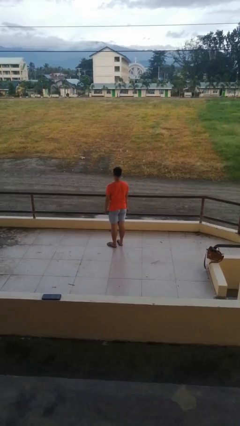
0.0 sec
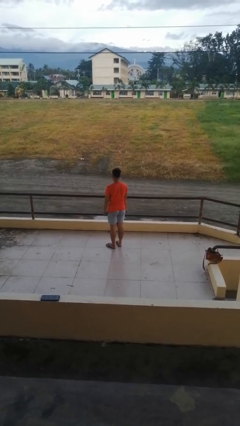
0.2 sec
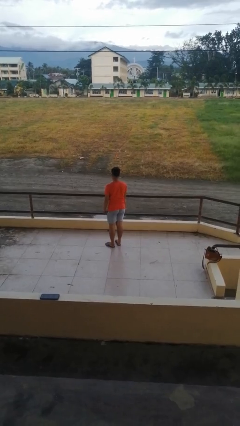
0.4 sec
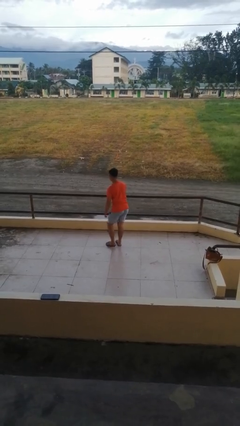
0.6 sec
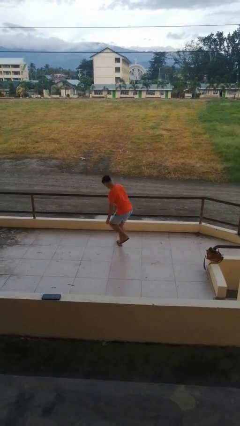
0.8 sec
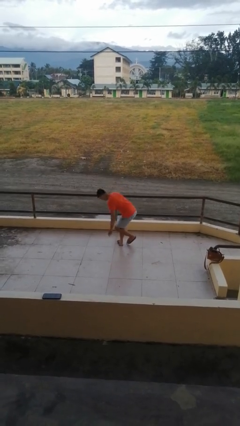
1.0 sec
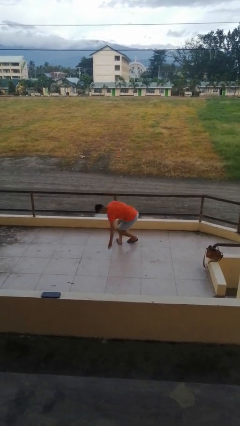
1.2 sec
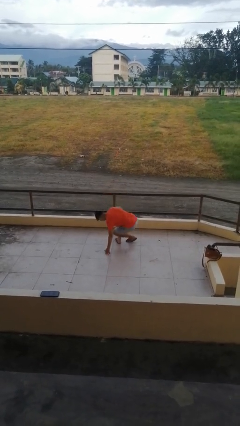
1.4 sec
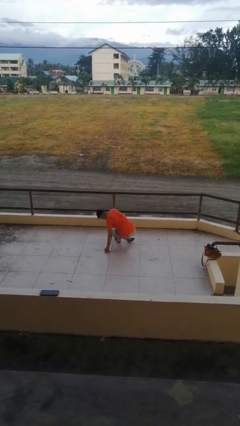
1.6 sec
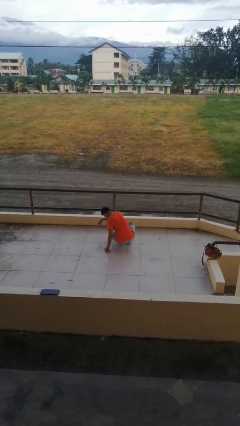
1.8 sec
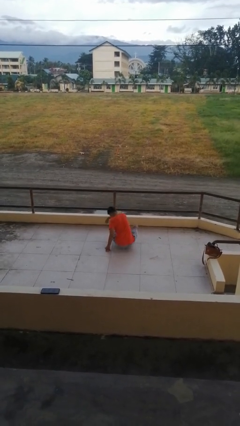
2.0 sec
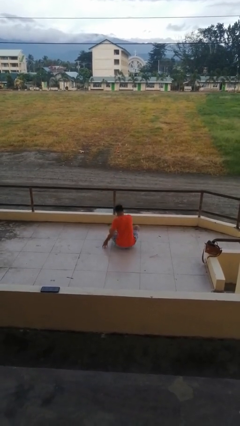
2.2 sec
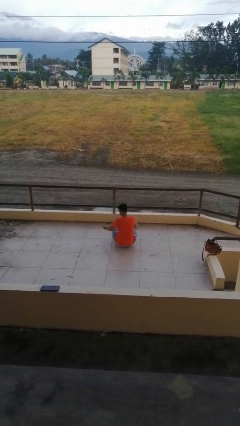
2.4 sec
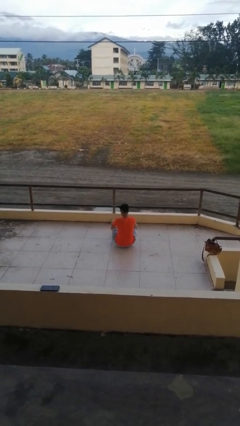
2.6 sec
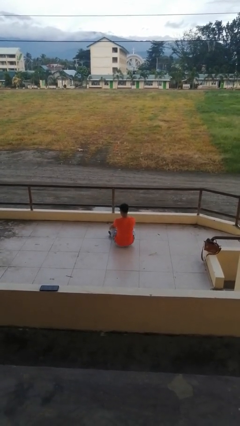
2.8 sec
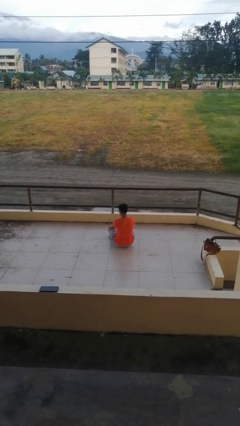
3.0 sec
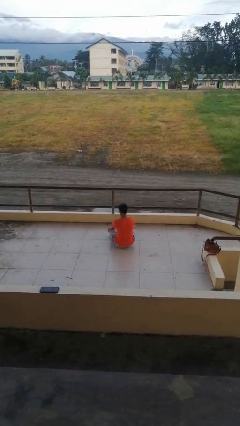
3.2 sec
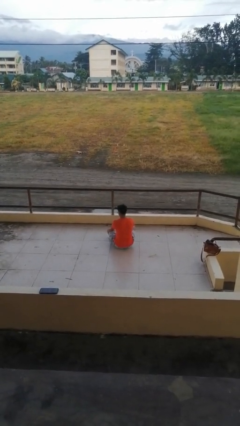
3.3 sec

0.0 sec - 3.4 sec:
person sits crisscross

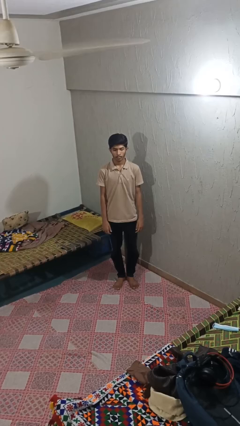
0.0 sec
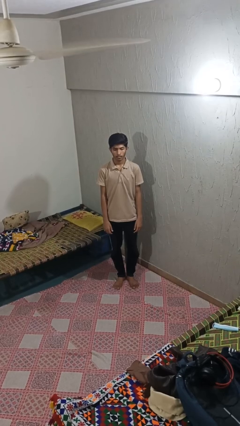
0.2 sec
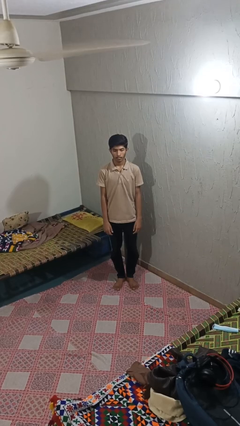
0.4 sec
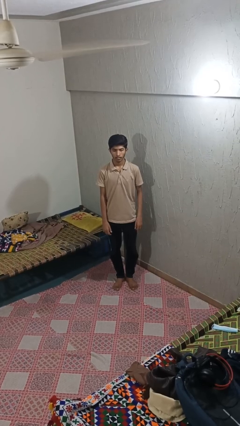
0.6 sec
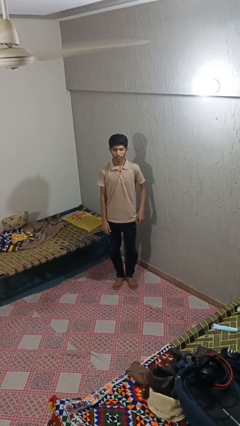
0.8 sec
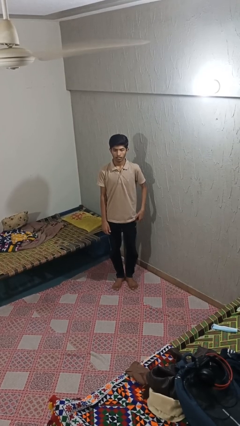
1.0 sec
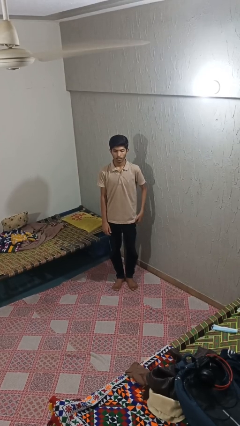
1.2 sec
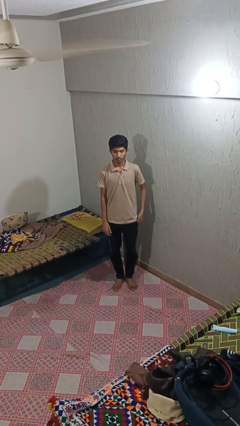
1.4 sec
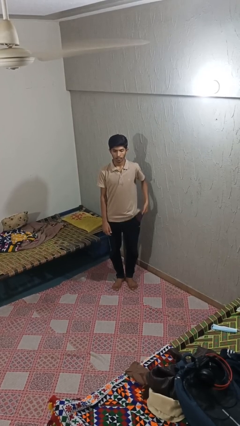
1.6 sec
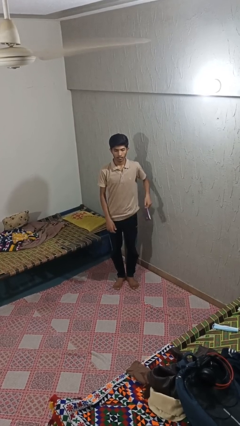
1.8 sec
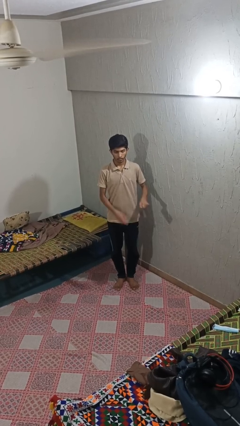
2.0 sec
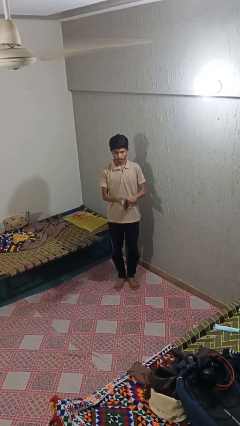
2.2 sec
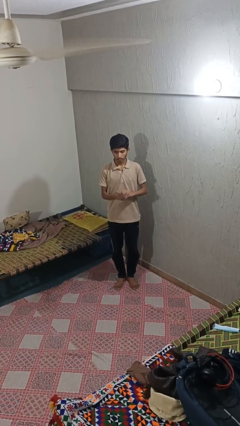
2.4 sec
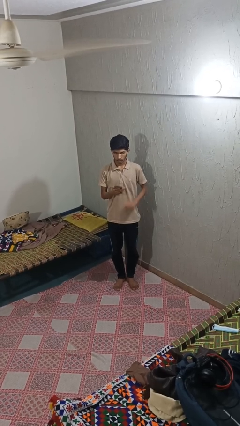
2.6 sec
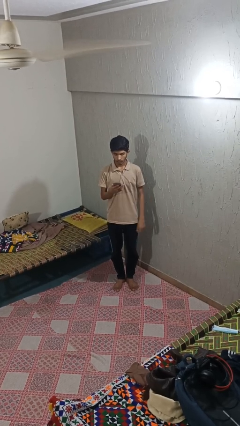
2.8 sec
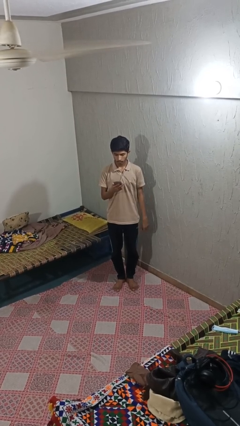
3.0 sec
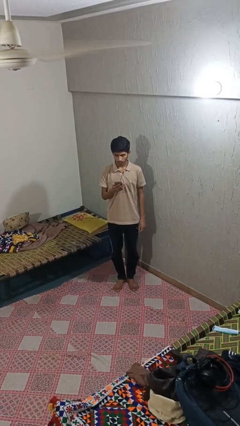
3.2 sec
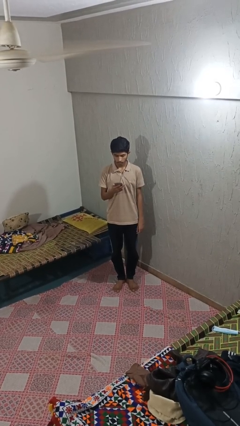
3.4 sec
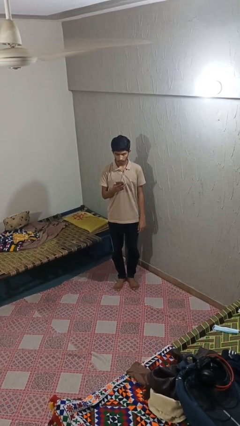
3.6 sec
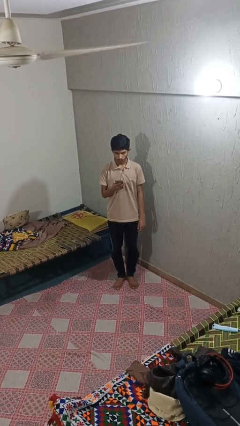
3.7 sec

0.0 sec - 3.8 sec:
person takes phone from pocket

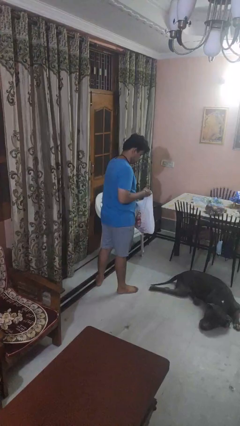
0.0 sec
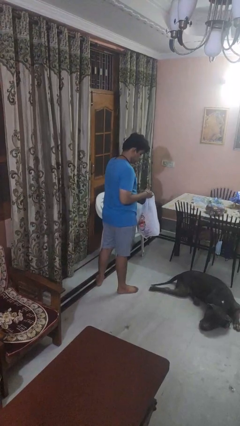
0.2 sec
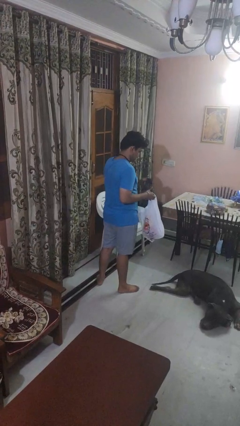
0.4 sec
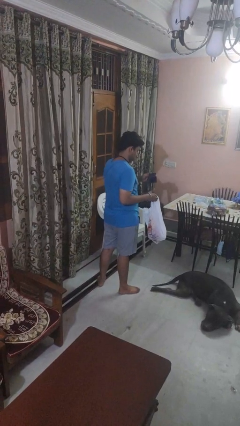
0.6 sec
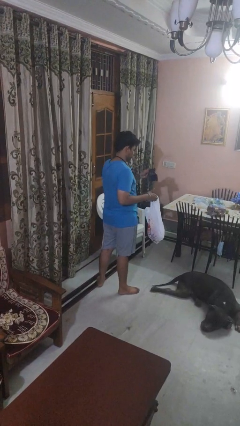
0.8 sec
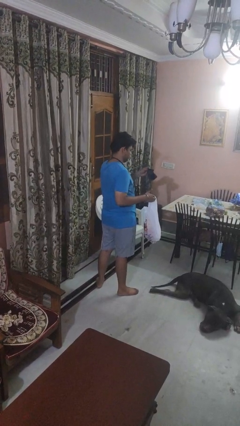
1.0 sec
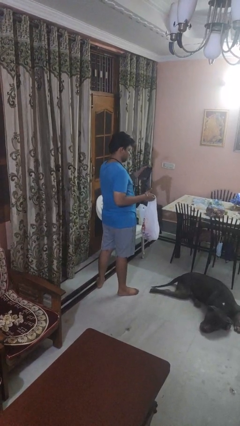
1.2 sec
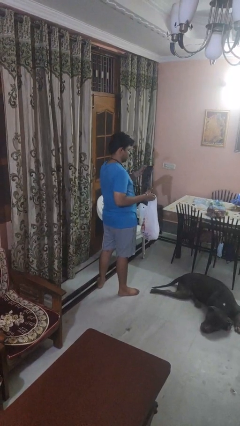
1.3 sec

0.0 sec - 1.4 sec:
person takes object from bag

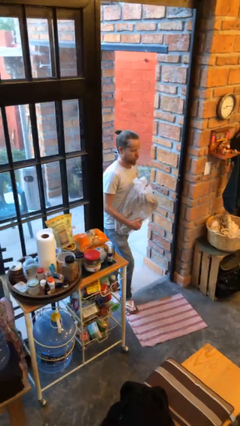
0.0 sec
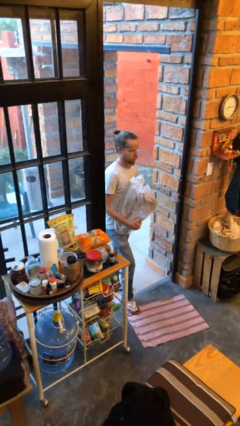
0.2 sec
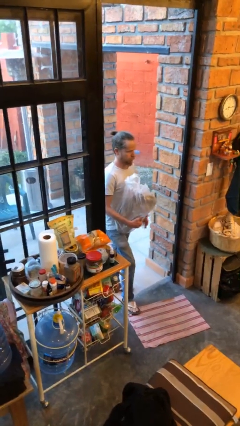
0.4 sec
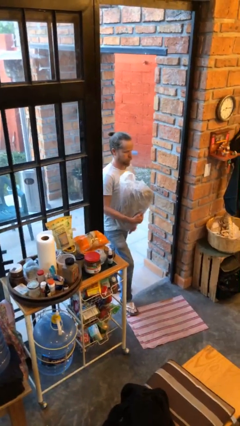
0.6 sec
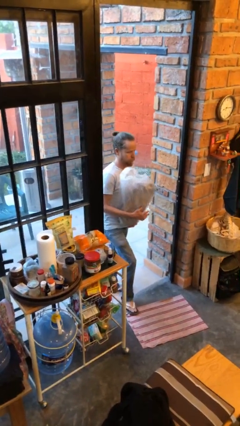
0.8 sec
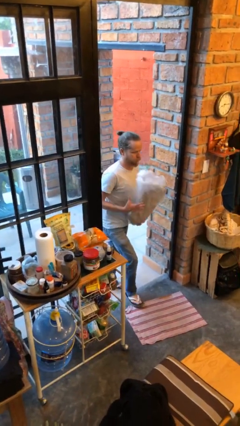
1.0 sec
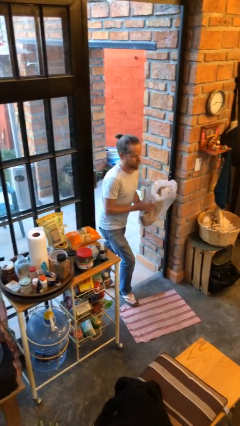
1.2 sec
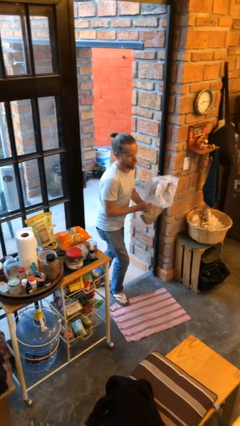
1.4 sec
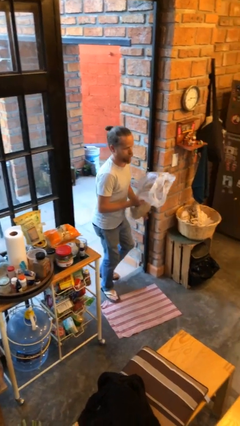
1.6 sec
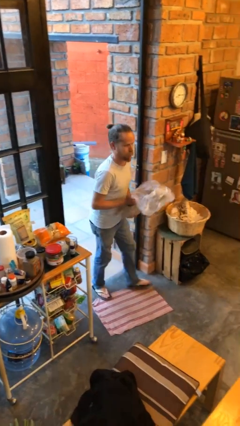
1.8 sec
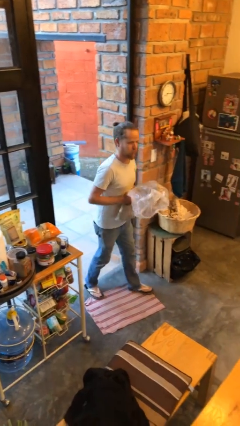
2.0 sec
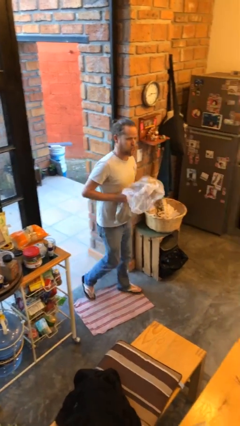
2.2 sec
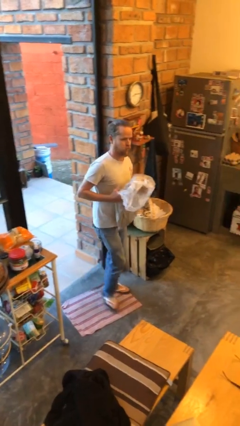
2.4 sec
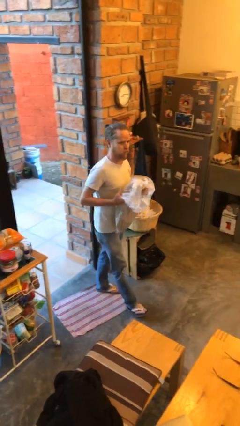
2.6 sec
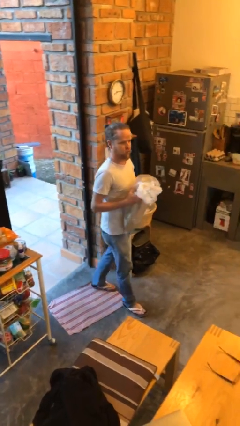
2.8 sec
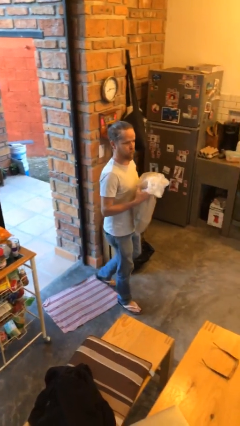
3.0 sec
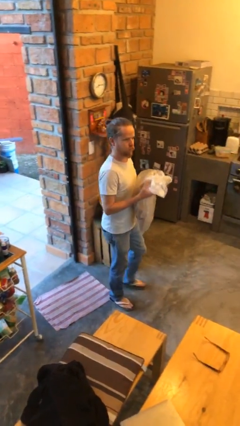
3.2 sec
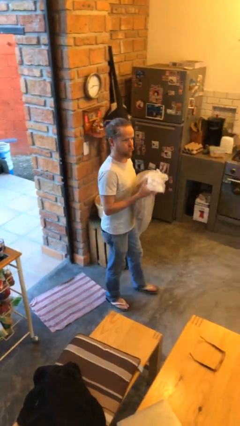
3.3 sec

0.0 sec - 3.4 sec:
person carries groceries

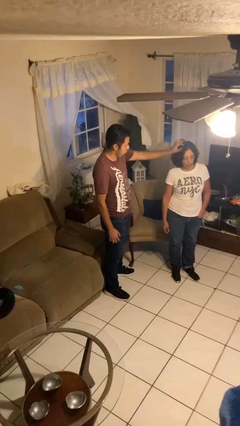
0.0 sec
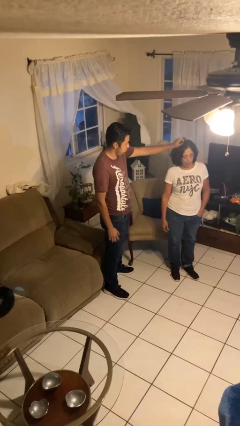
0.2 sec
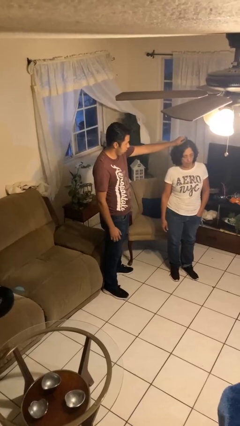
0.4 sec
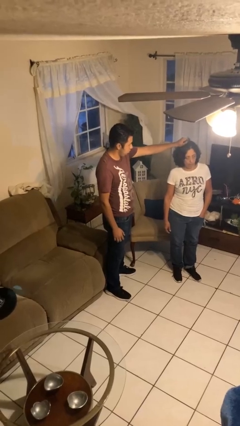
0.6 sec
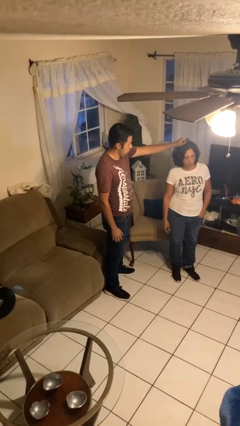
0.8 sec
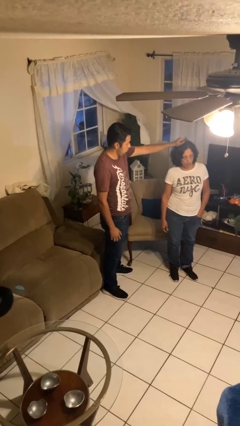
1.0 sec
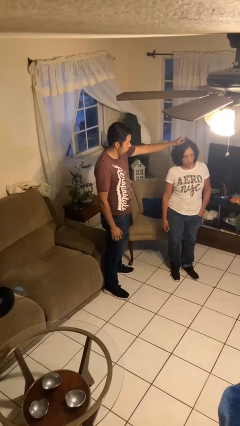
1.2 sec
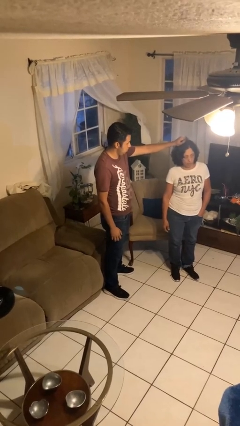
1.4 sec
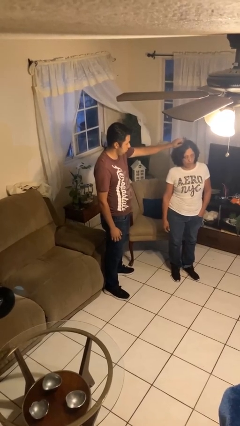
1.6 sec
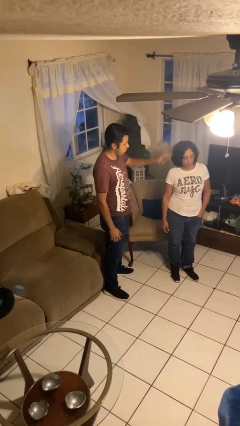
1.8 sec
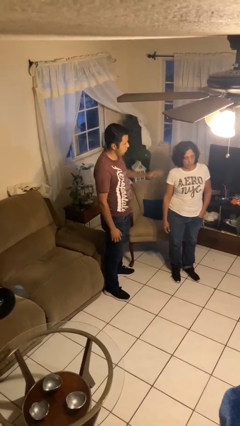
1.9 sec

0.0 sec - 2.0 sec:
person grabs person by hair

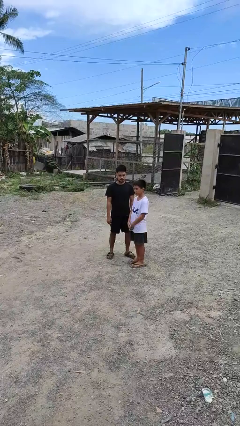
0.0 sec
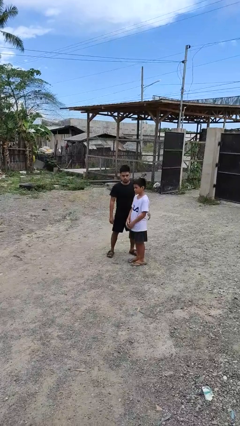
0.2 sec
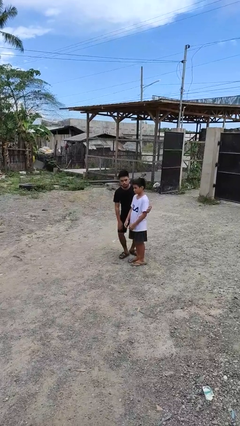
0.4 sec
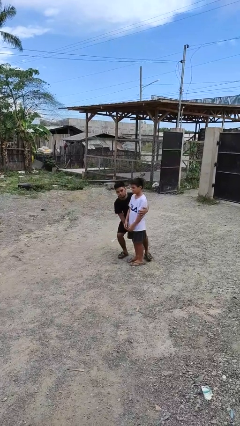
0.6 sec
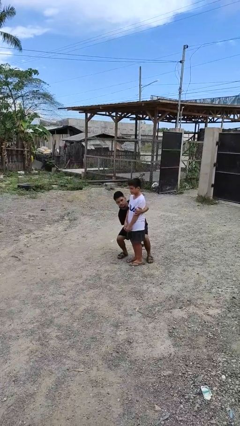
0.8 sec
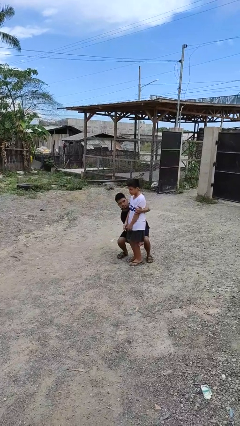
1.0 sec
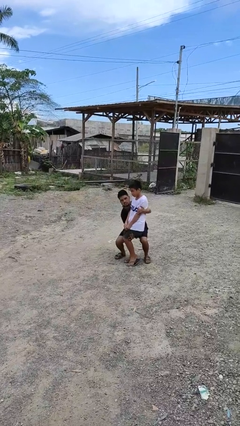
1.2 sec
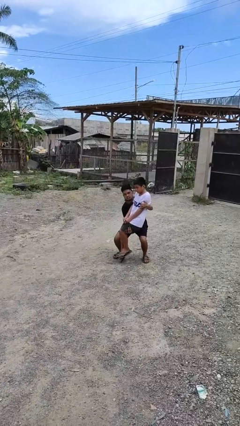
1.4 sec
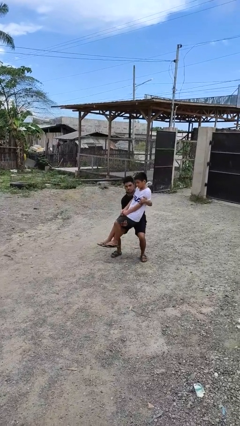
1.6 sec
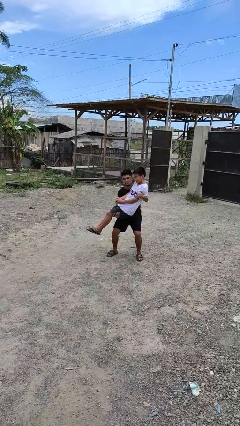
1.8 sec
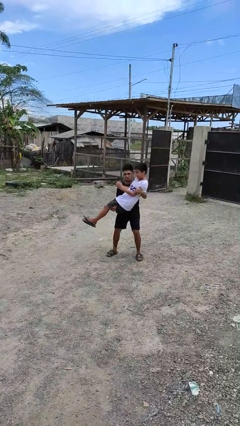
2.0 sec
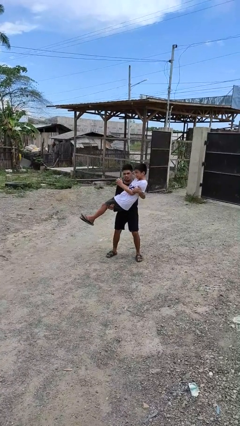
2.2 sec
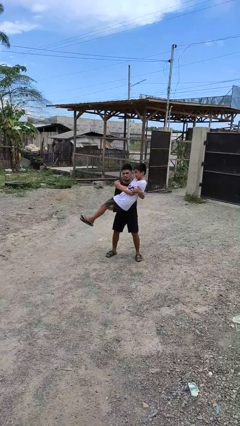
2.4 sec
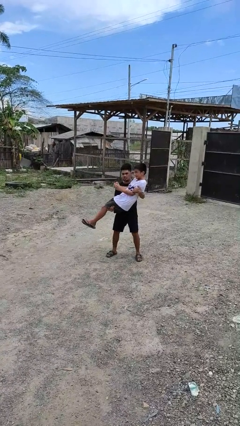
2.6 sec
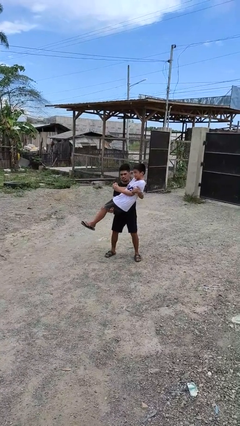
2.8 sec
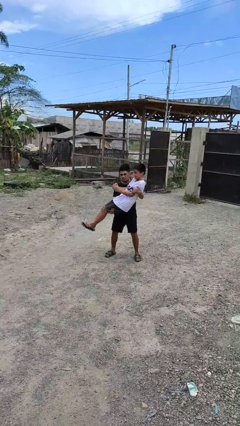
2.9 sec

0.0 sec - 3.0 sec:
person picks up person

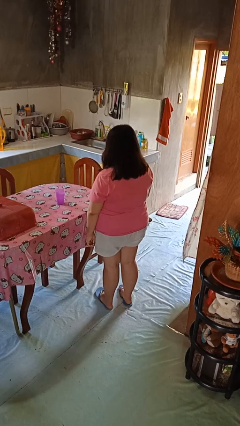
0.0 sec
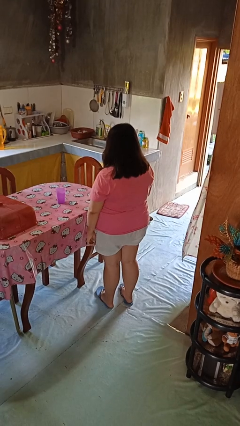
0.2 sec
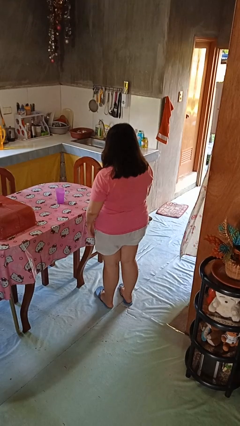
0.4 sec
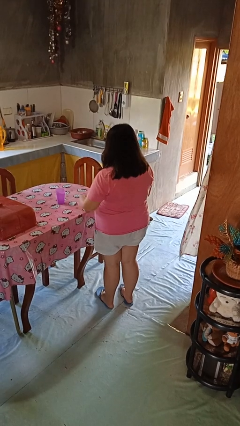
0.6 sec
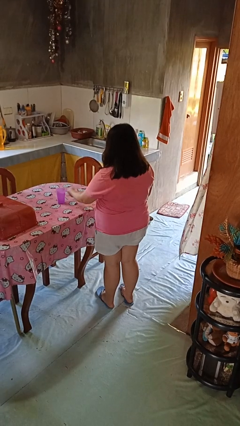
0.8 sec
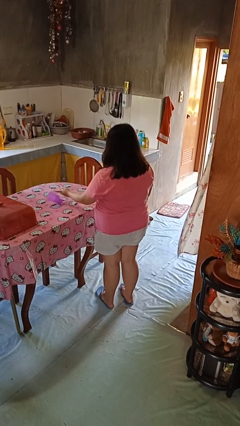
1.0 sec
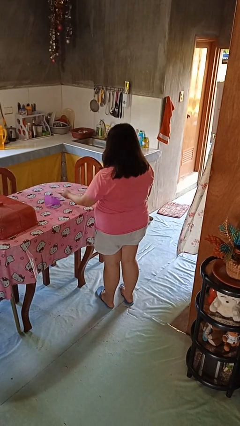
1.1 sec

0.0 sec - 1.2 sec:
person knocks over glass
